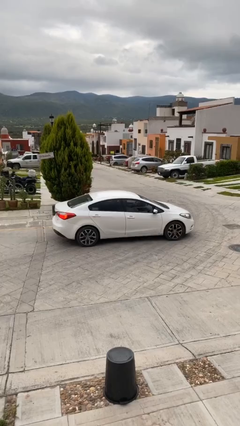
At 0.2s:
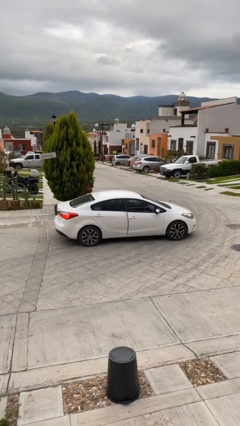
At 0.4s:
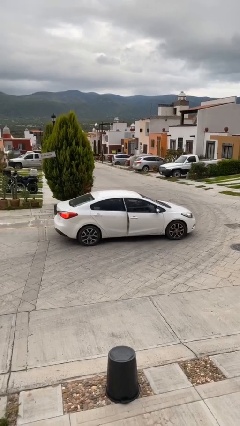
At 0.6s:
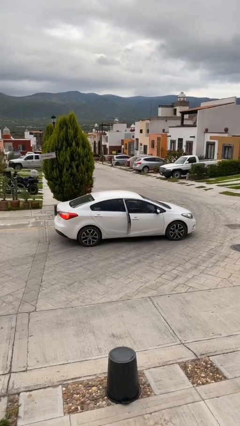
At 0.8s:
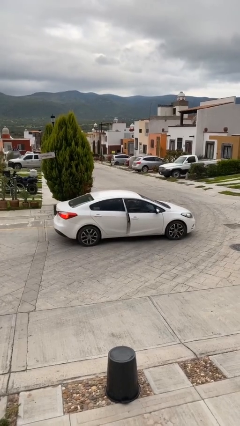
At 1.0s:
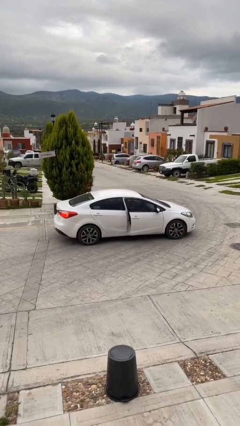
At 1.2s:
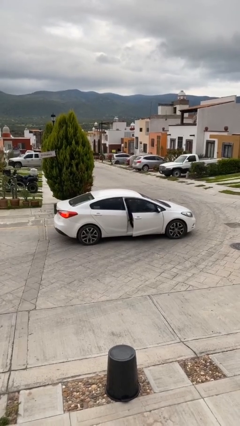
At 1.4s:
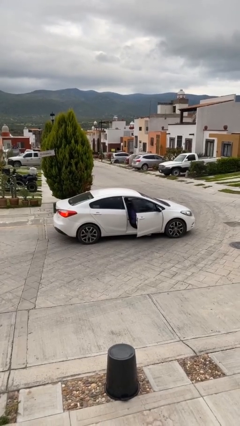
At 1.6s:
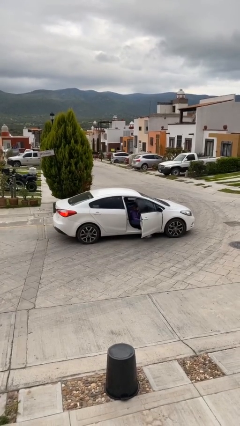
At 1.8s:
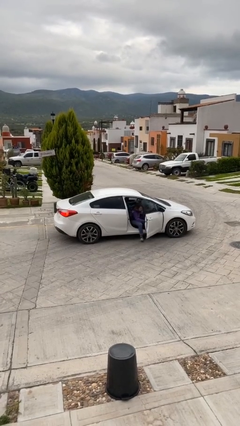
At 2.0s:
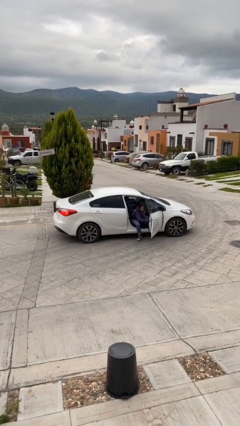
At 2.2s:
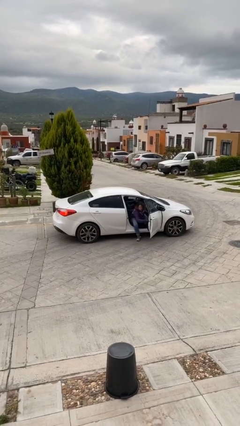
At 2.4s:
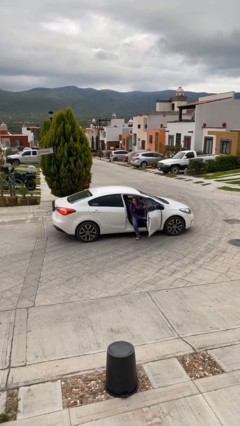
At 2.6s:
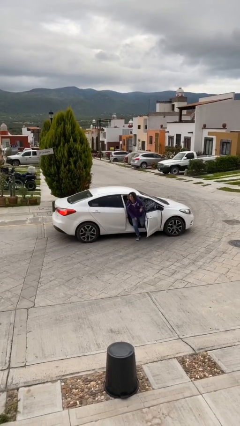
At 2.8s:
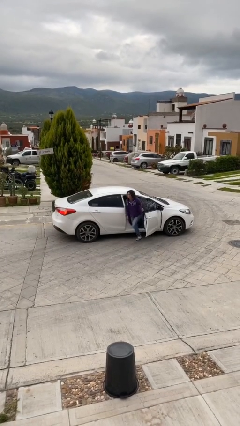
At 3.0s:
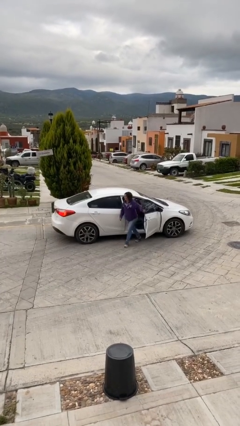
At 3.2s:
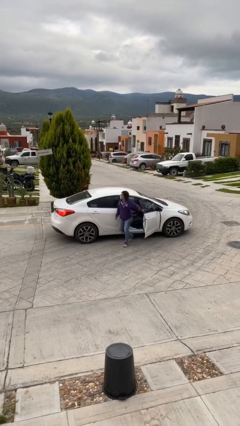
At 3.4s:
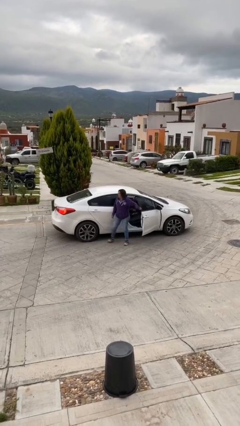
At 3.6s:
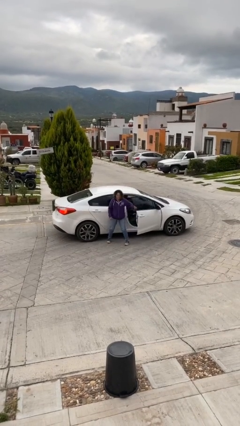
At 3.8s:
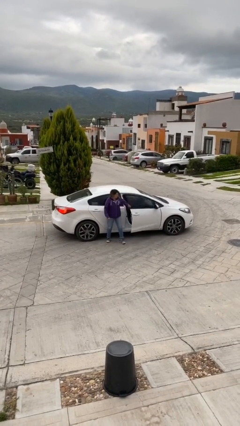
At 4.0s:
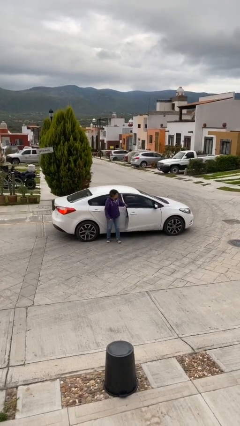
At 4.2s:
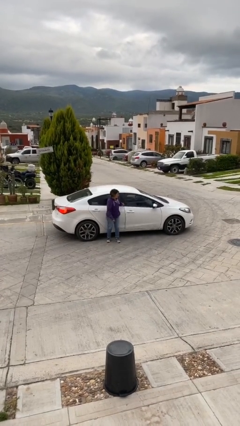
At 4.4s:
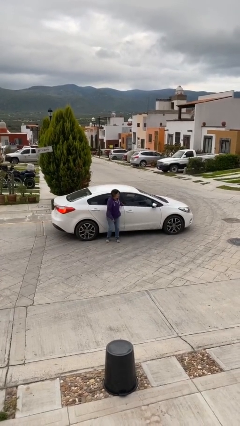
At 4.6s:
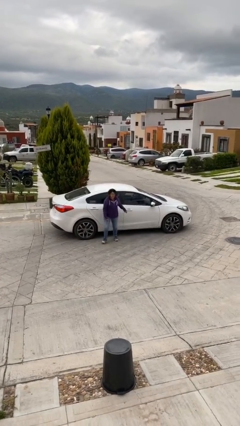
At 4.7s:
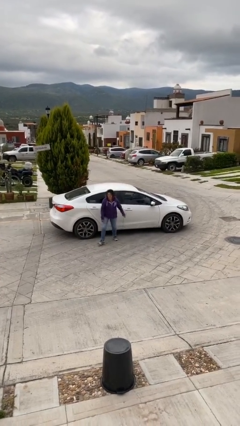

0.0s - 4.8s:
car drops off person

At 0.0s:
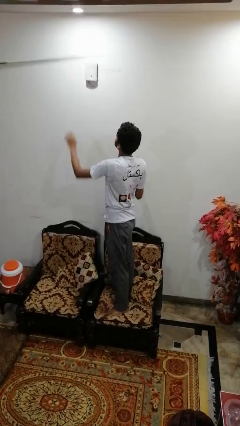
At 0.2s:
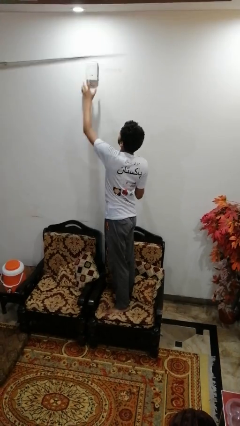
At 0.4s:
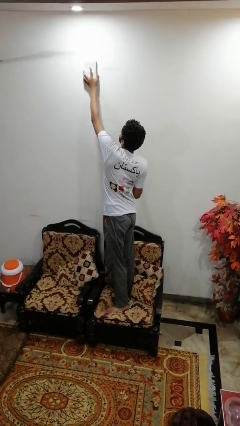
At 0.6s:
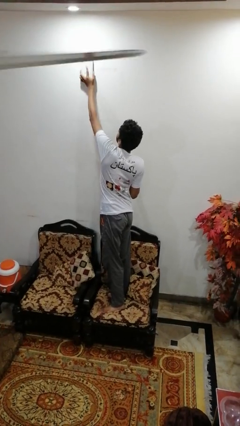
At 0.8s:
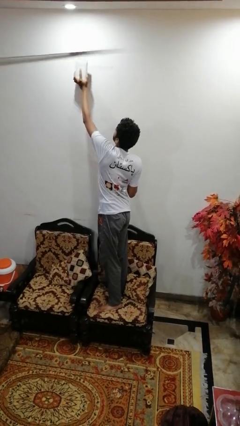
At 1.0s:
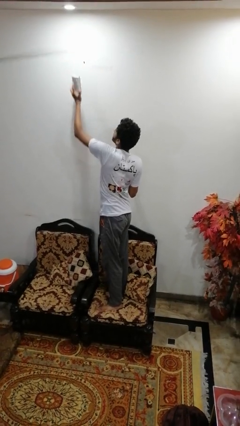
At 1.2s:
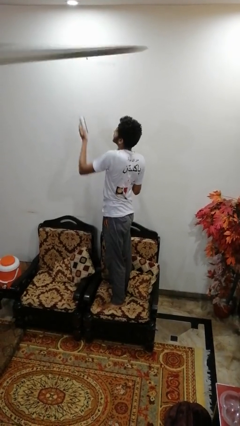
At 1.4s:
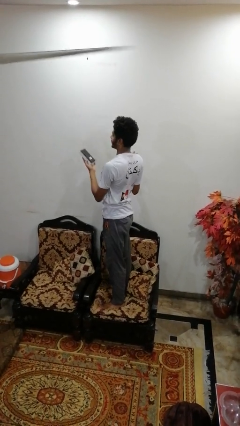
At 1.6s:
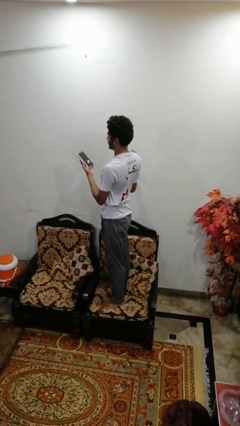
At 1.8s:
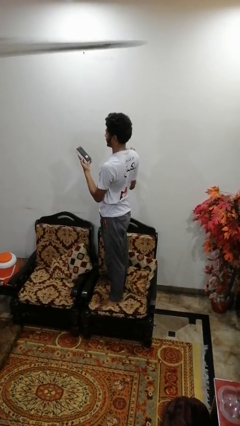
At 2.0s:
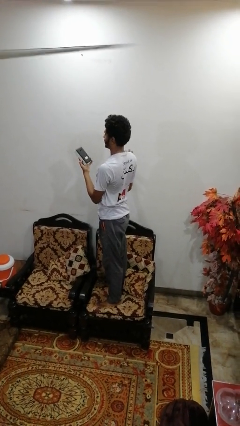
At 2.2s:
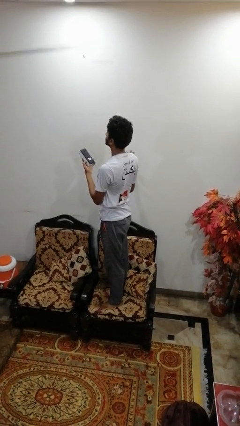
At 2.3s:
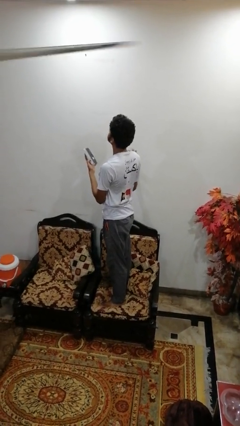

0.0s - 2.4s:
person takes down smoke detector

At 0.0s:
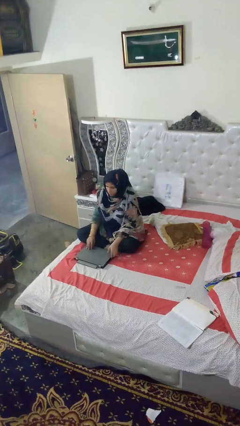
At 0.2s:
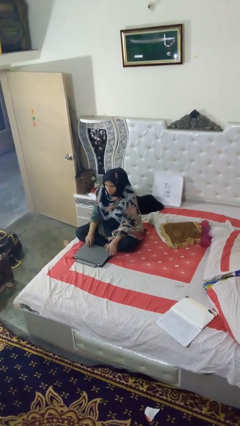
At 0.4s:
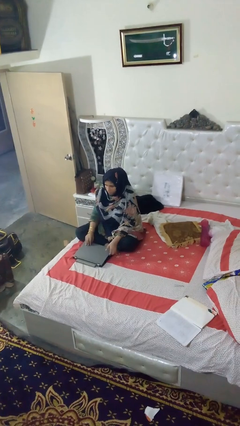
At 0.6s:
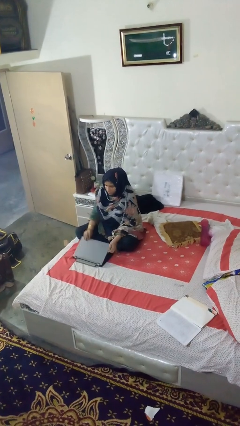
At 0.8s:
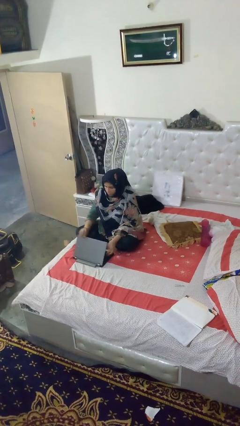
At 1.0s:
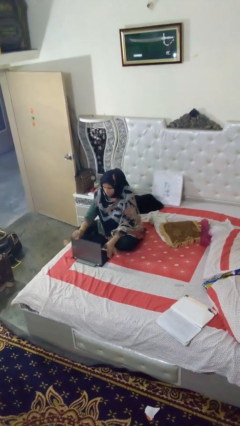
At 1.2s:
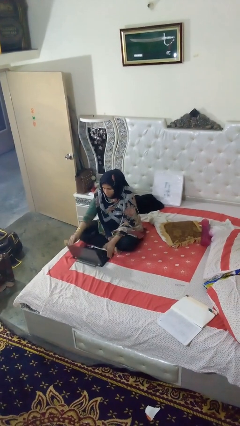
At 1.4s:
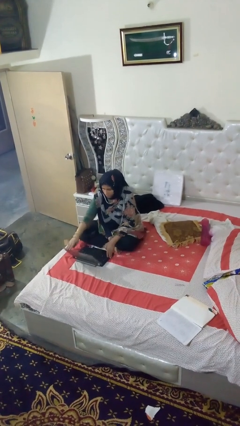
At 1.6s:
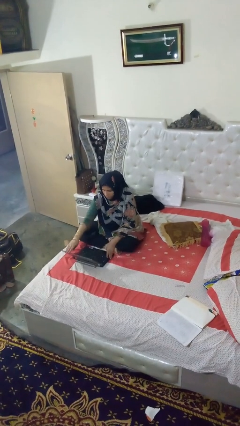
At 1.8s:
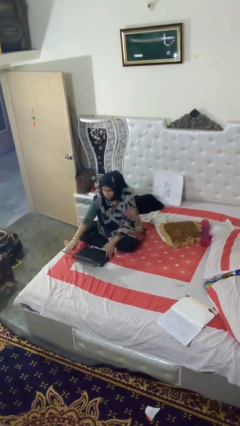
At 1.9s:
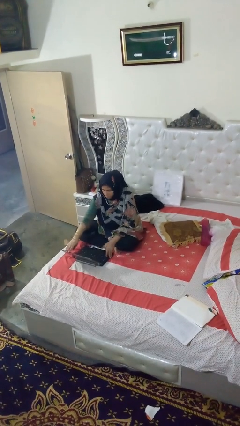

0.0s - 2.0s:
person opens laptop

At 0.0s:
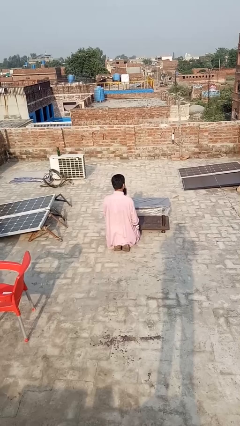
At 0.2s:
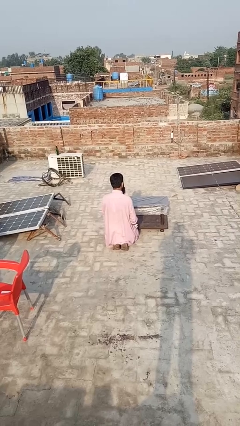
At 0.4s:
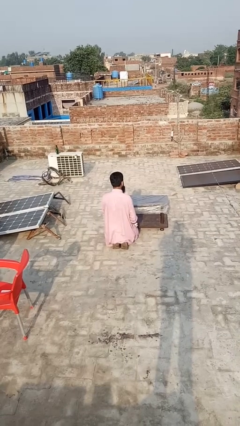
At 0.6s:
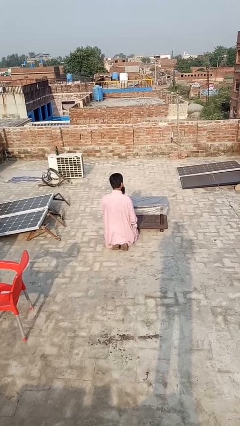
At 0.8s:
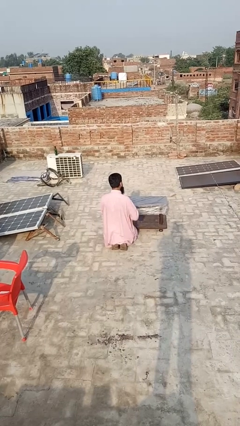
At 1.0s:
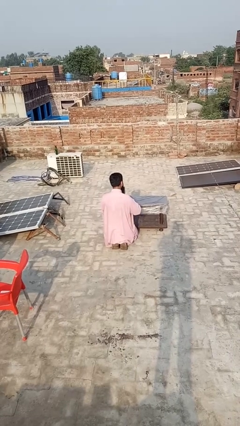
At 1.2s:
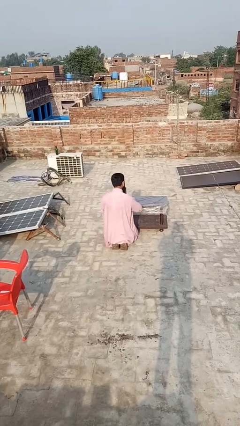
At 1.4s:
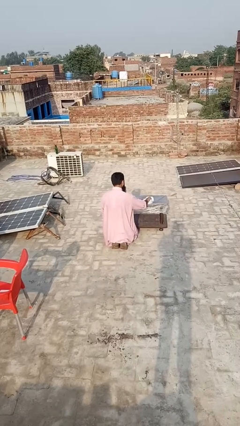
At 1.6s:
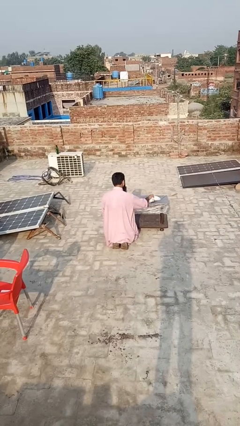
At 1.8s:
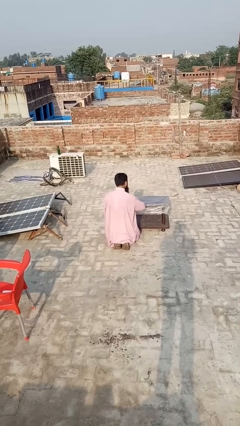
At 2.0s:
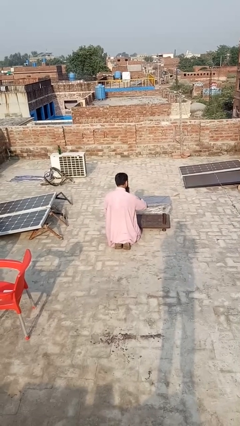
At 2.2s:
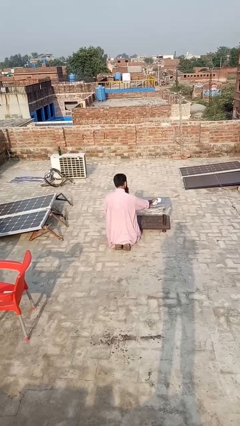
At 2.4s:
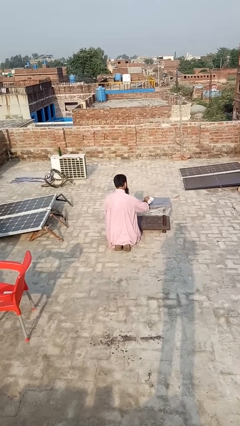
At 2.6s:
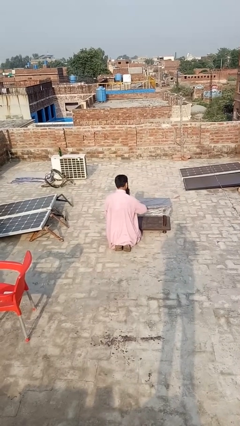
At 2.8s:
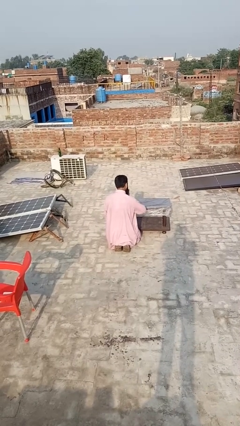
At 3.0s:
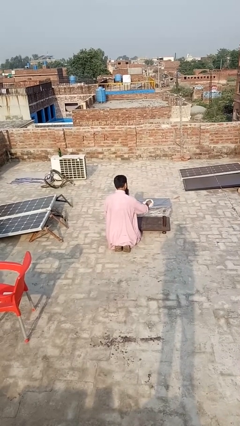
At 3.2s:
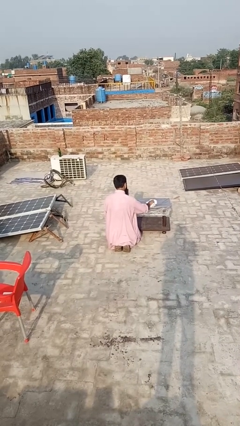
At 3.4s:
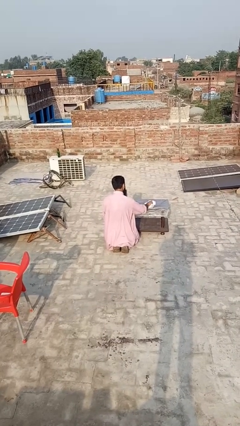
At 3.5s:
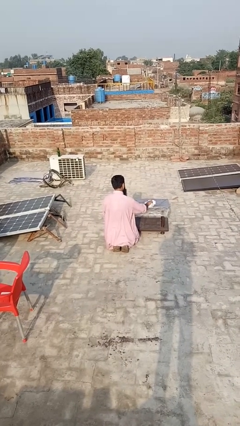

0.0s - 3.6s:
person cleans table with rag

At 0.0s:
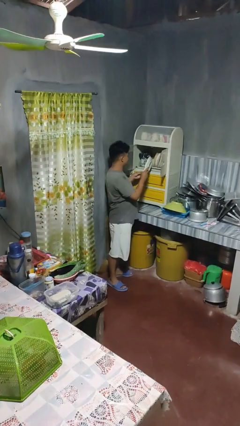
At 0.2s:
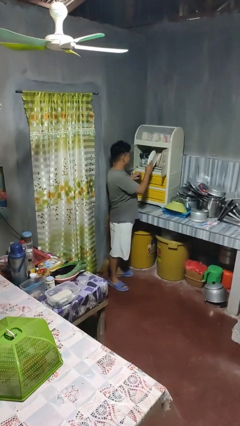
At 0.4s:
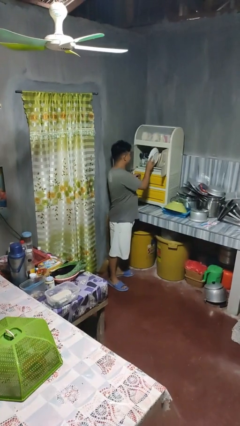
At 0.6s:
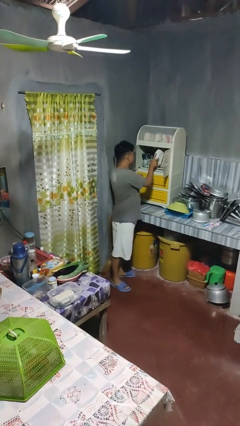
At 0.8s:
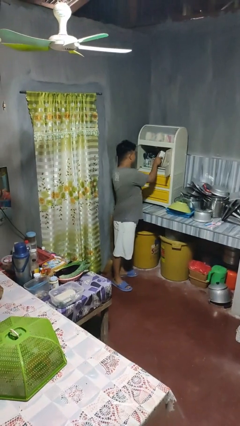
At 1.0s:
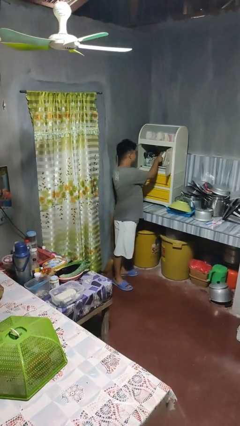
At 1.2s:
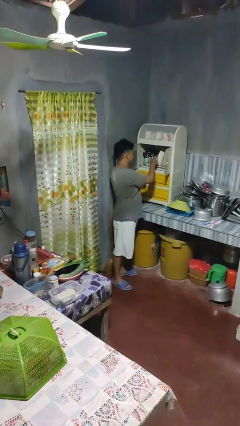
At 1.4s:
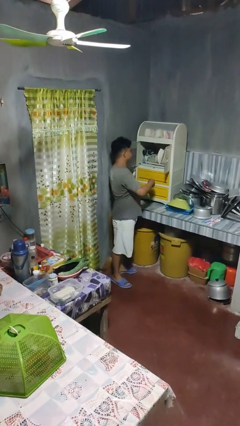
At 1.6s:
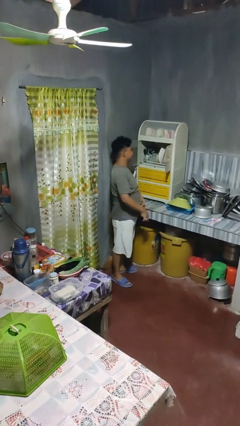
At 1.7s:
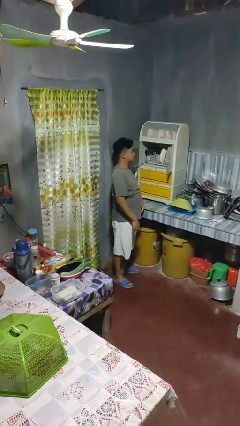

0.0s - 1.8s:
person puts object in cabinet

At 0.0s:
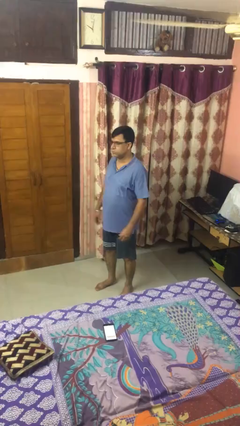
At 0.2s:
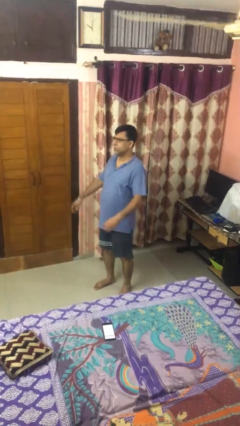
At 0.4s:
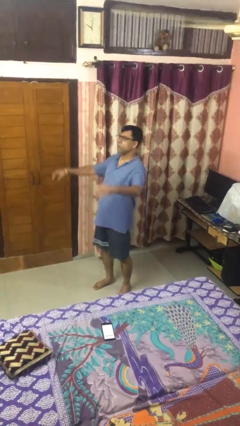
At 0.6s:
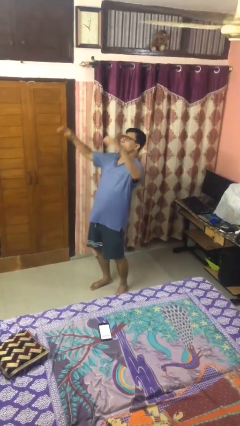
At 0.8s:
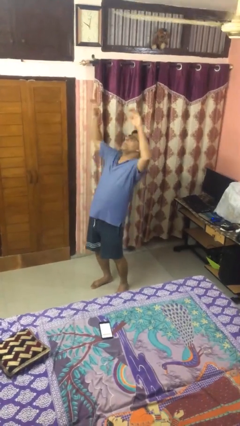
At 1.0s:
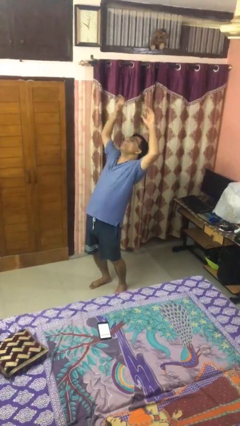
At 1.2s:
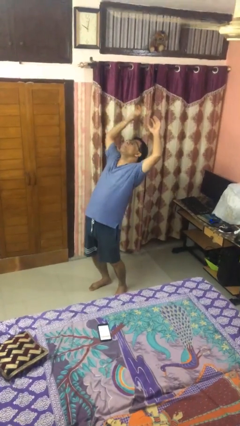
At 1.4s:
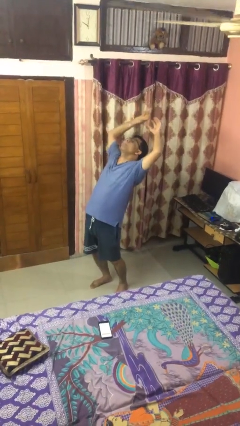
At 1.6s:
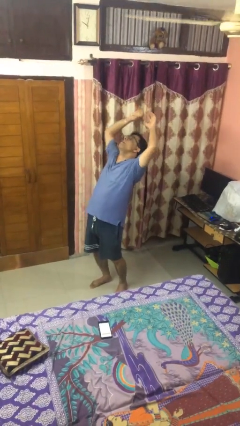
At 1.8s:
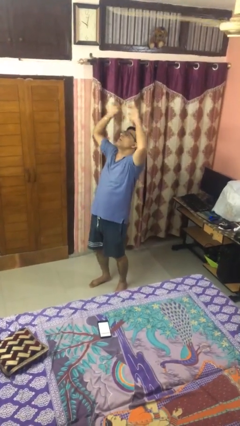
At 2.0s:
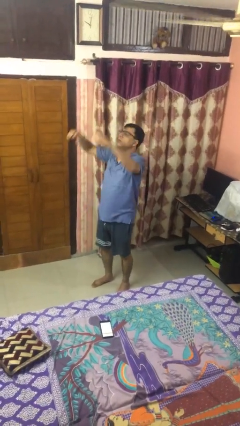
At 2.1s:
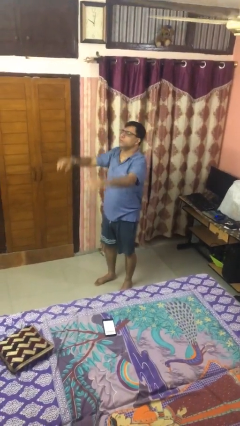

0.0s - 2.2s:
person stretches back

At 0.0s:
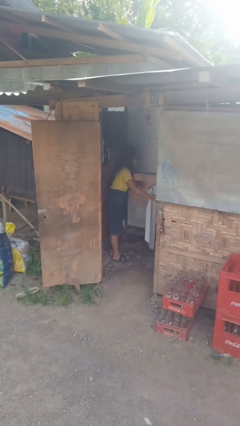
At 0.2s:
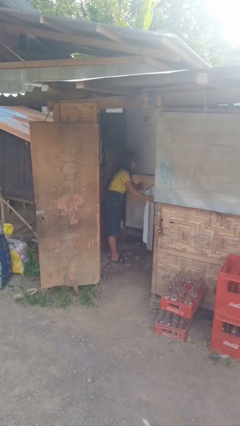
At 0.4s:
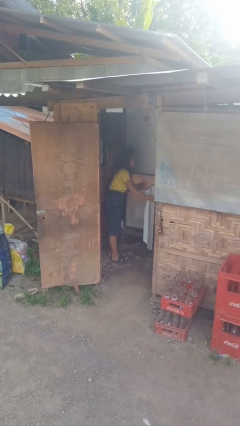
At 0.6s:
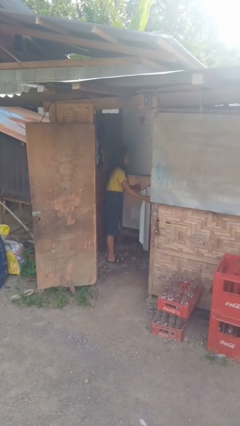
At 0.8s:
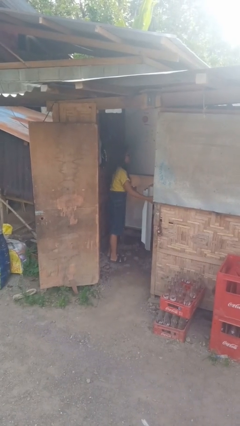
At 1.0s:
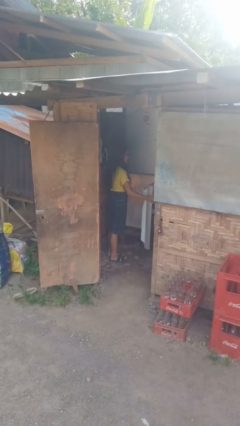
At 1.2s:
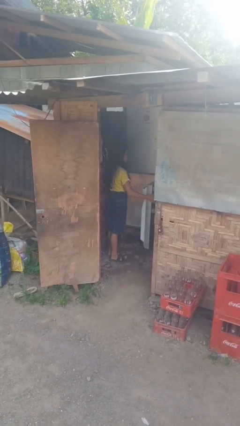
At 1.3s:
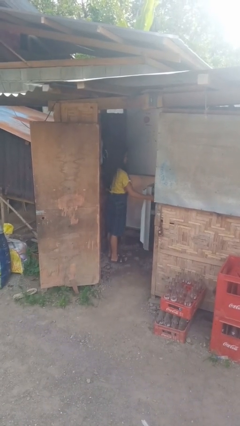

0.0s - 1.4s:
person takes object from refrigerator
